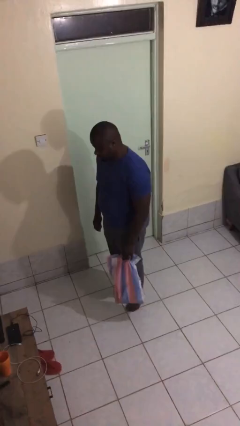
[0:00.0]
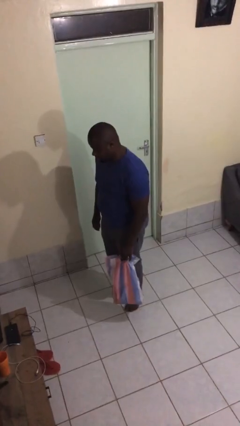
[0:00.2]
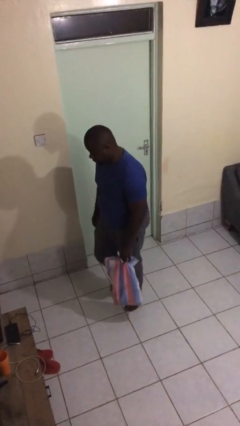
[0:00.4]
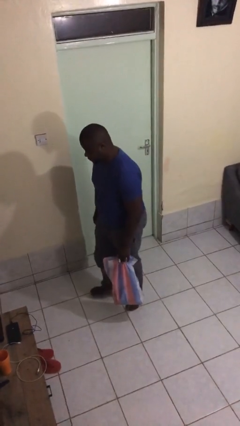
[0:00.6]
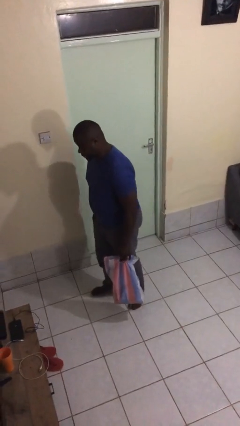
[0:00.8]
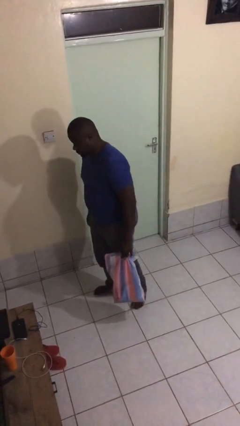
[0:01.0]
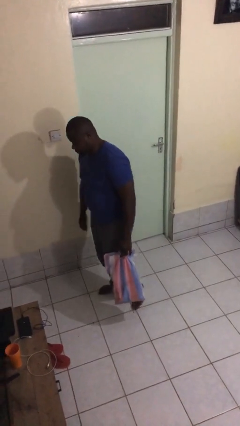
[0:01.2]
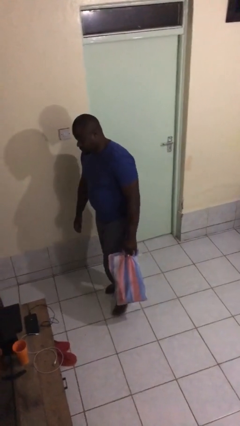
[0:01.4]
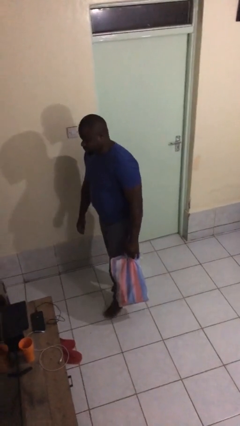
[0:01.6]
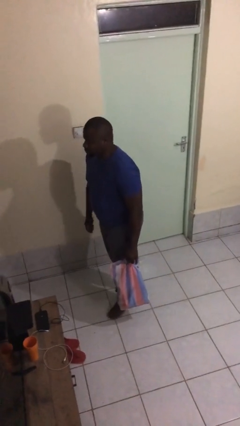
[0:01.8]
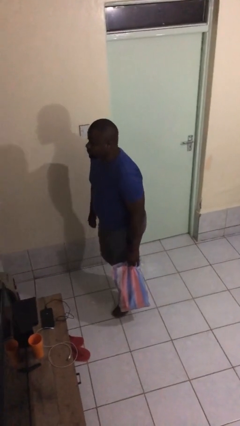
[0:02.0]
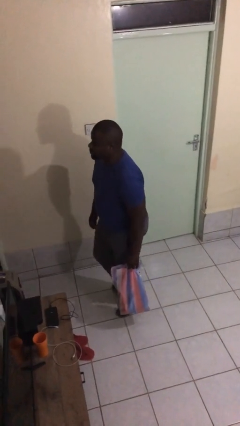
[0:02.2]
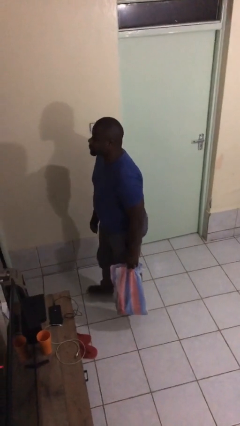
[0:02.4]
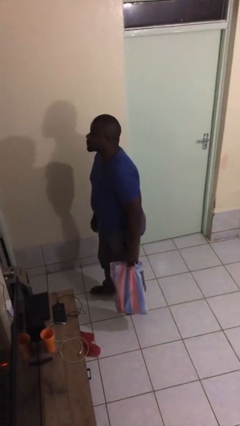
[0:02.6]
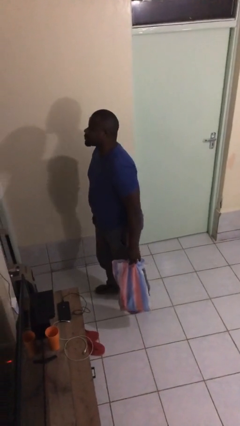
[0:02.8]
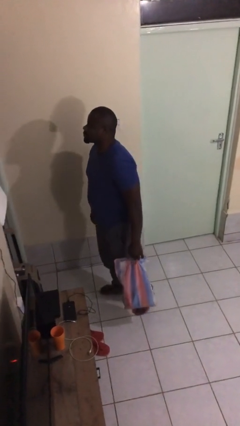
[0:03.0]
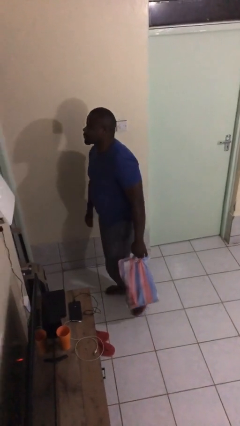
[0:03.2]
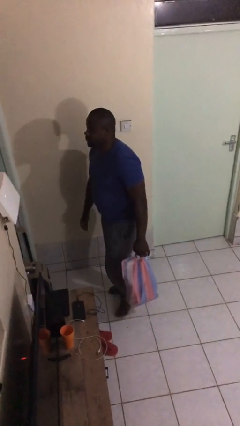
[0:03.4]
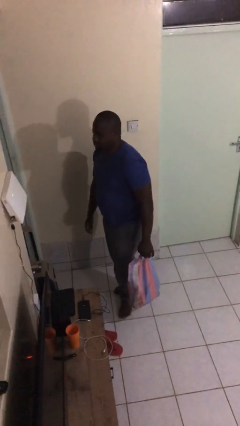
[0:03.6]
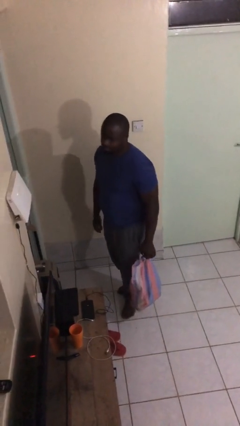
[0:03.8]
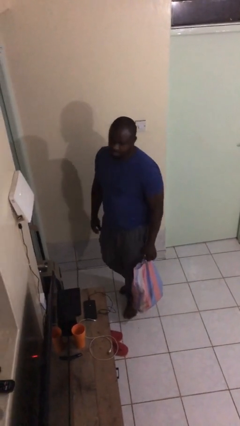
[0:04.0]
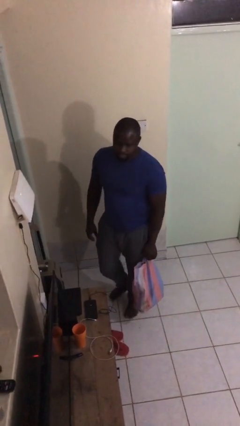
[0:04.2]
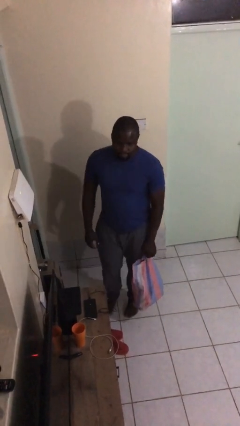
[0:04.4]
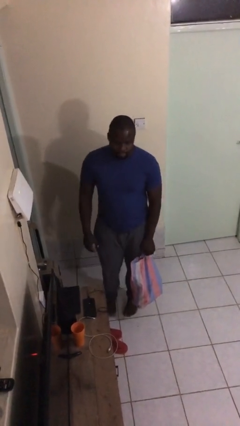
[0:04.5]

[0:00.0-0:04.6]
person carries groceries

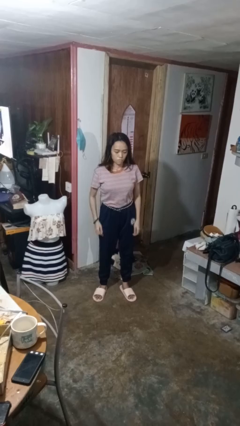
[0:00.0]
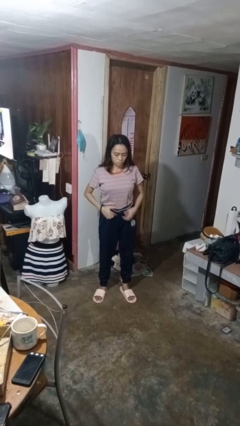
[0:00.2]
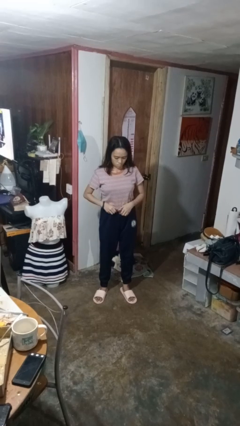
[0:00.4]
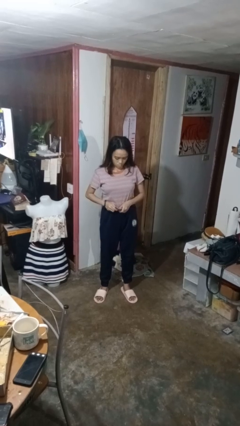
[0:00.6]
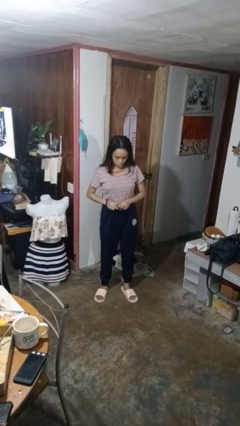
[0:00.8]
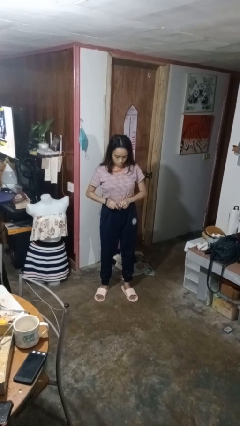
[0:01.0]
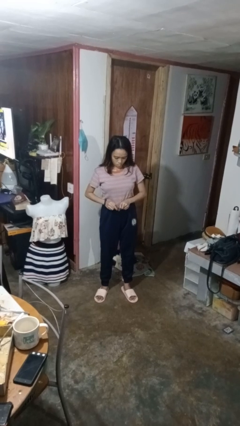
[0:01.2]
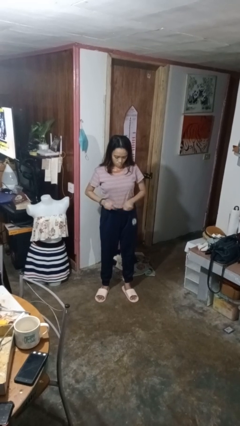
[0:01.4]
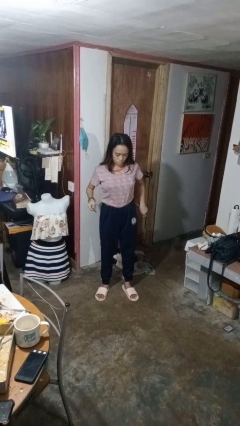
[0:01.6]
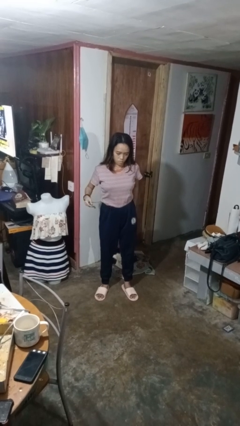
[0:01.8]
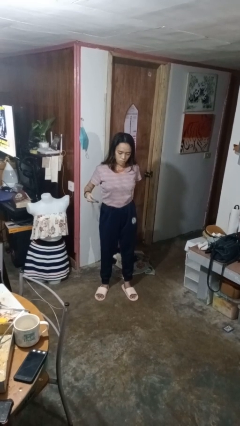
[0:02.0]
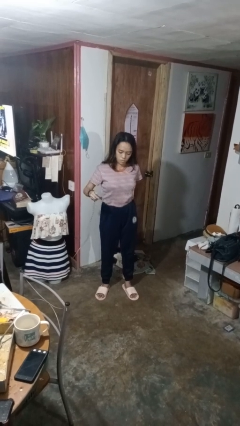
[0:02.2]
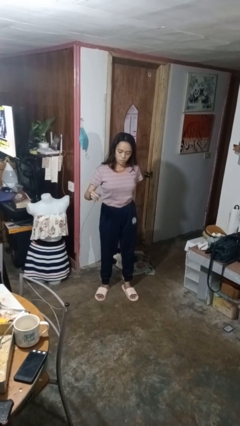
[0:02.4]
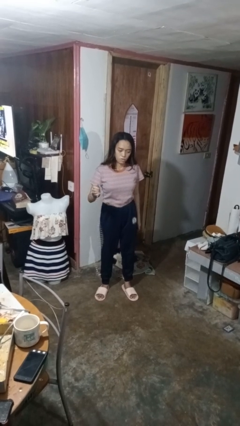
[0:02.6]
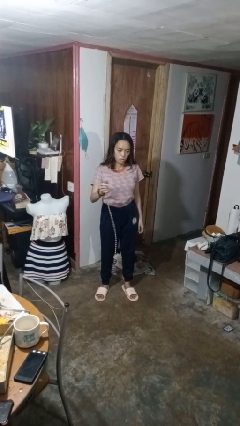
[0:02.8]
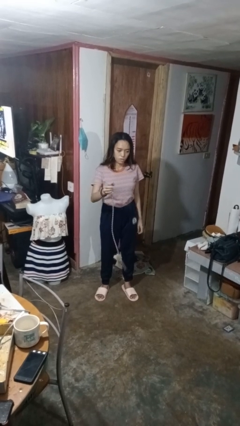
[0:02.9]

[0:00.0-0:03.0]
person takes off belt

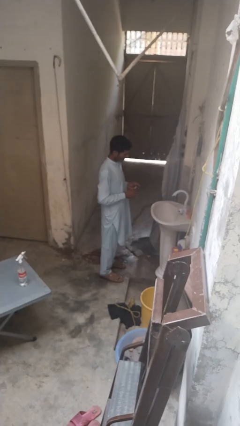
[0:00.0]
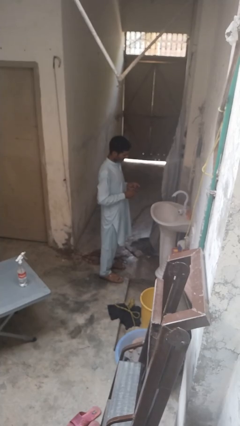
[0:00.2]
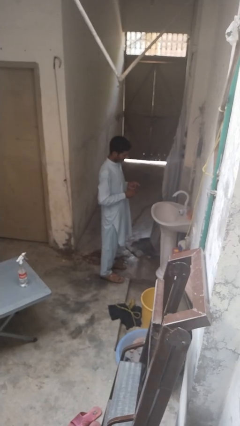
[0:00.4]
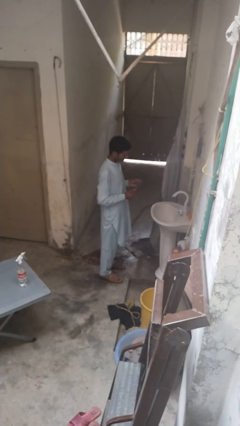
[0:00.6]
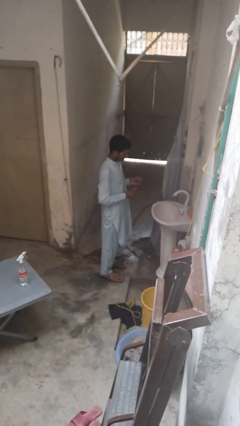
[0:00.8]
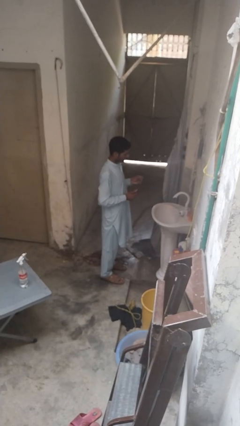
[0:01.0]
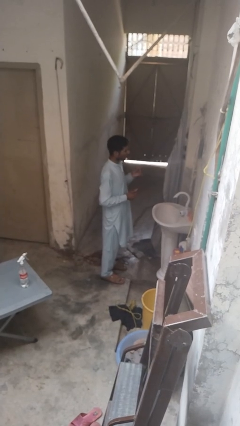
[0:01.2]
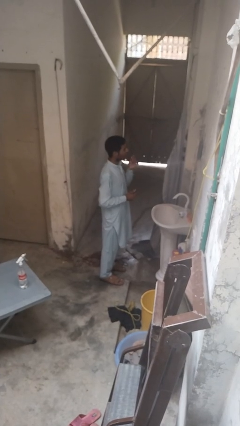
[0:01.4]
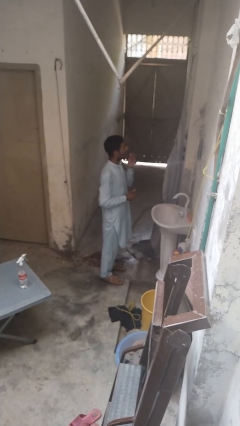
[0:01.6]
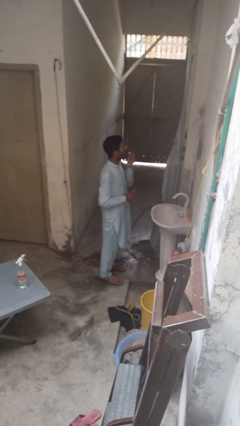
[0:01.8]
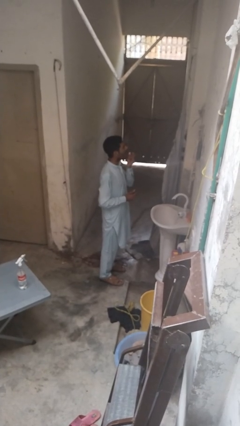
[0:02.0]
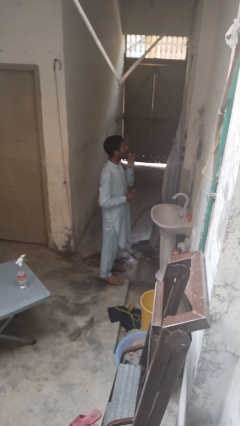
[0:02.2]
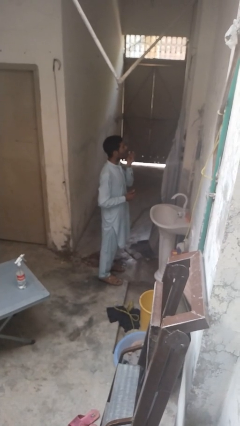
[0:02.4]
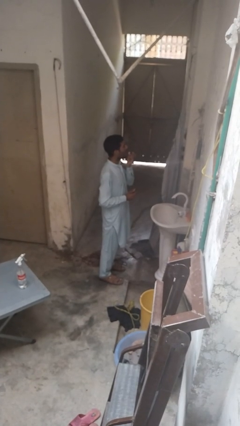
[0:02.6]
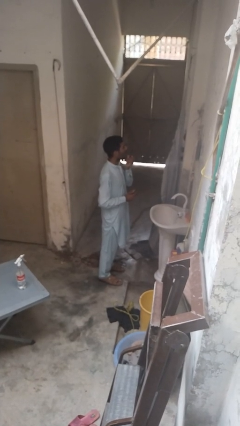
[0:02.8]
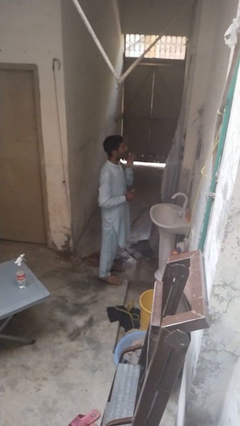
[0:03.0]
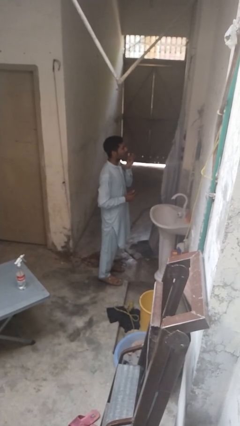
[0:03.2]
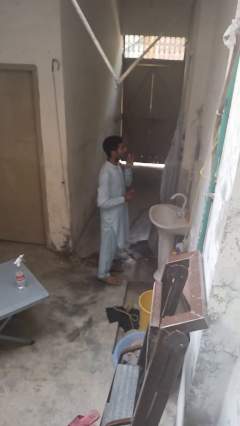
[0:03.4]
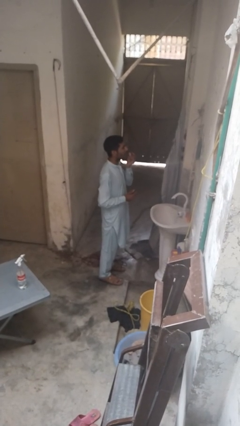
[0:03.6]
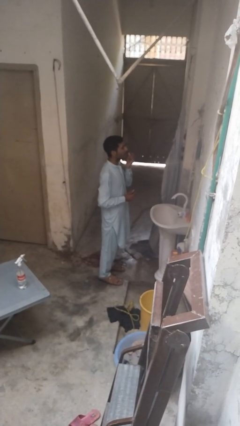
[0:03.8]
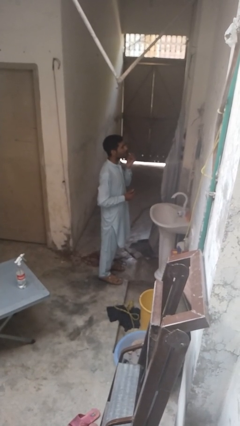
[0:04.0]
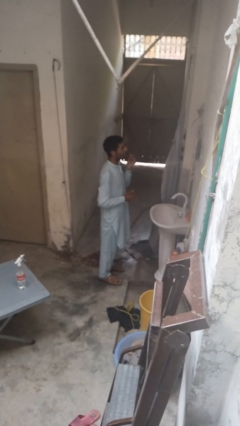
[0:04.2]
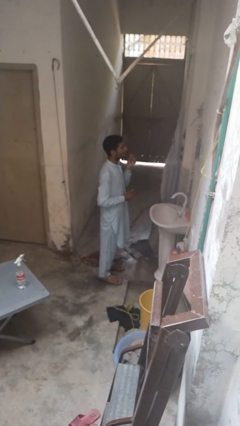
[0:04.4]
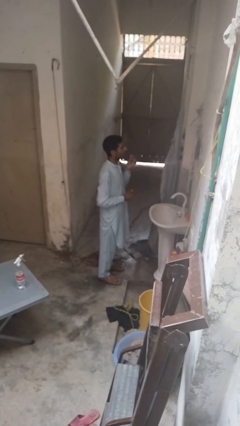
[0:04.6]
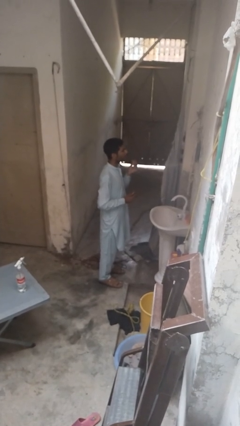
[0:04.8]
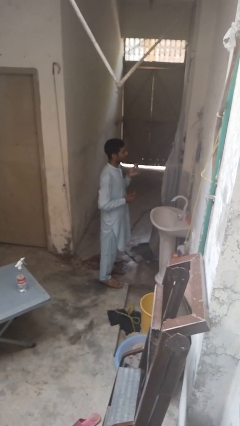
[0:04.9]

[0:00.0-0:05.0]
person applies lip makeup

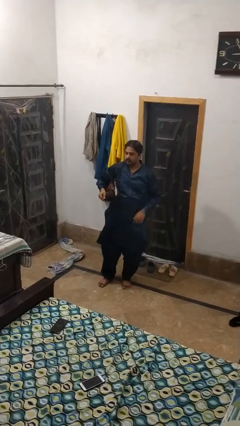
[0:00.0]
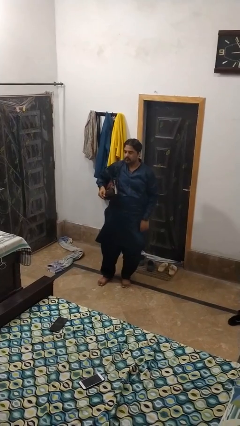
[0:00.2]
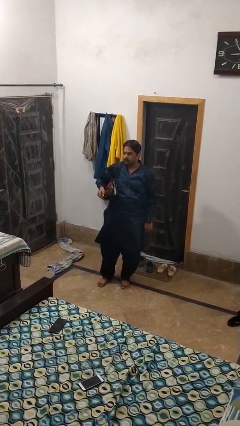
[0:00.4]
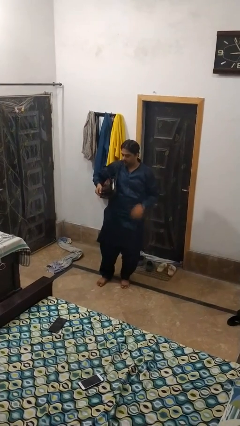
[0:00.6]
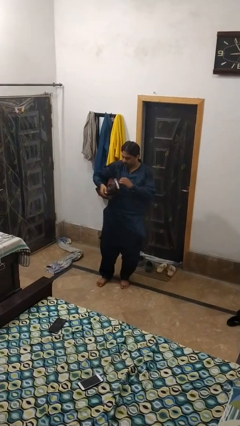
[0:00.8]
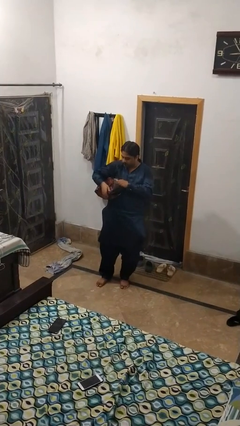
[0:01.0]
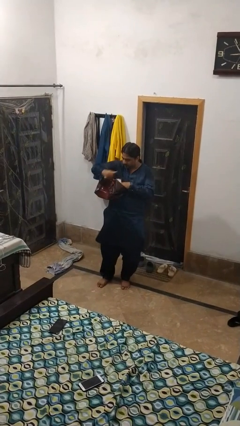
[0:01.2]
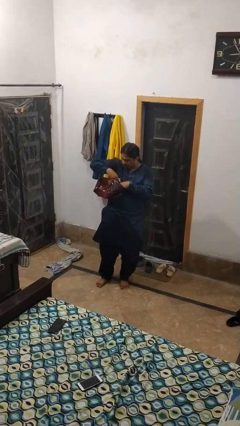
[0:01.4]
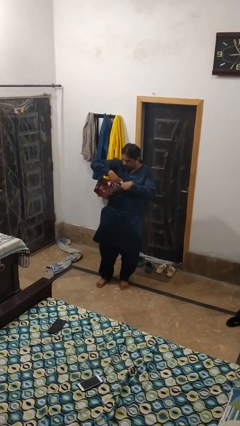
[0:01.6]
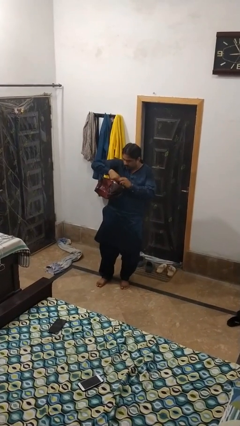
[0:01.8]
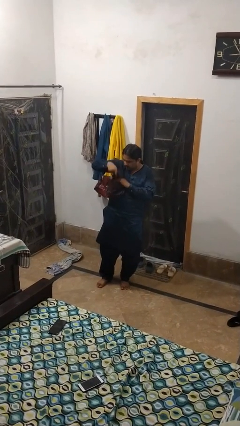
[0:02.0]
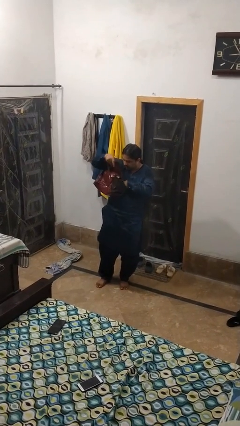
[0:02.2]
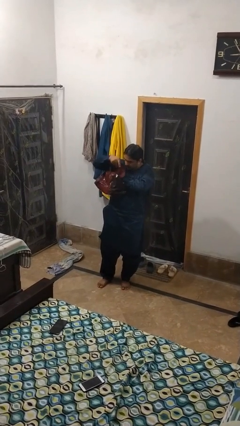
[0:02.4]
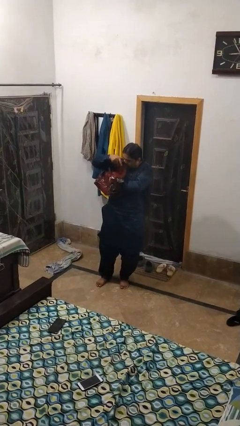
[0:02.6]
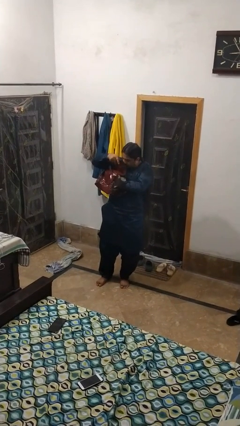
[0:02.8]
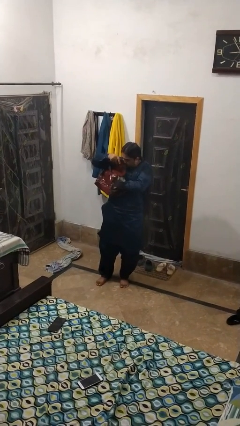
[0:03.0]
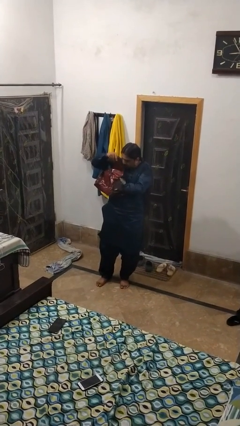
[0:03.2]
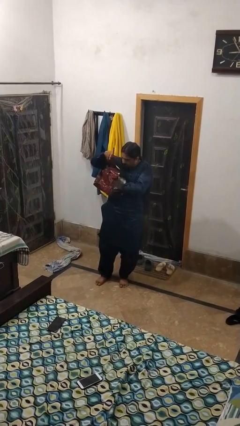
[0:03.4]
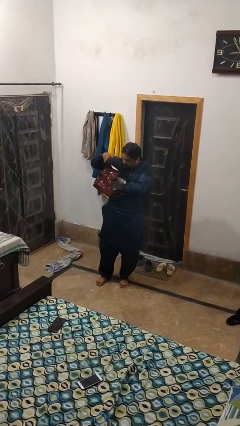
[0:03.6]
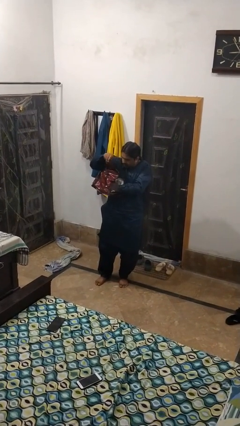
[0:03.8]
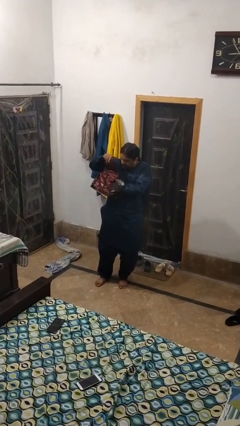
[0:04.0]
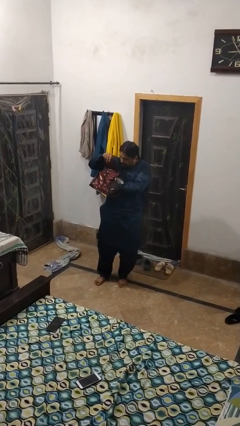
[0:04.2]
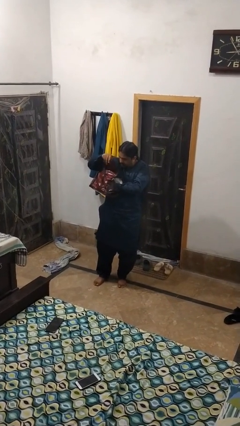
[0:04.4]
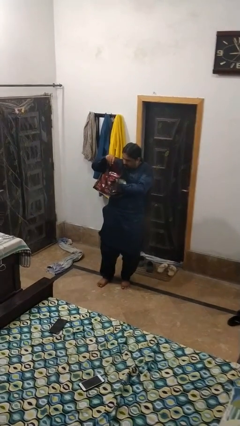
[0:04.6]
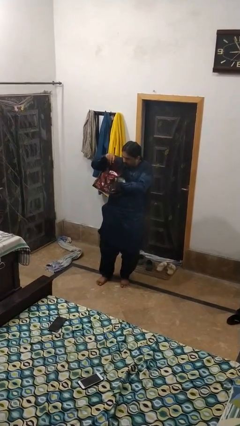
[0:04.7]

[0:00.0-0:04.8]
person searches in purse
